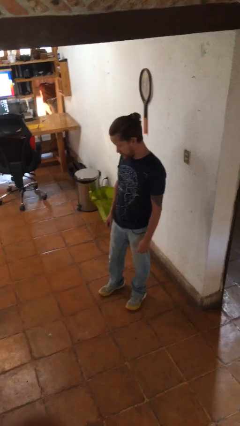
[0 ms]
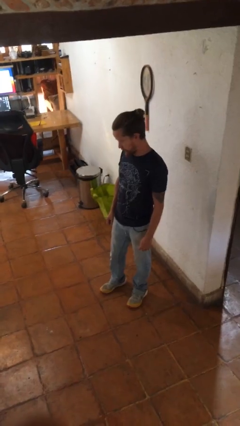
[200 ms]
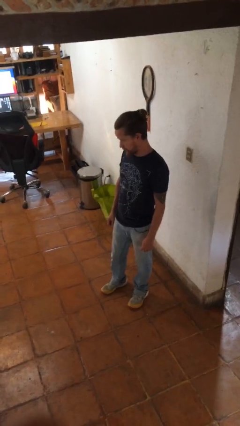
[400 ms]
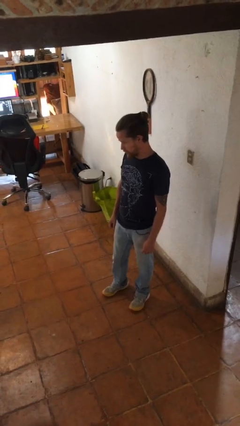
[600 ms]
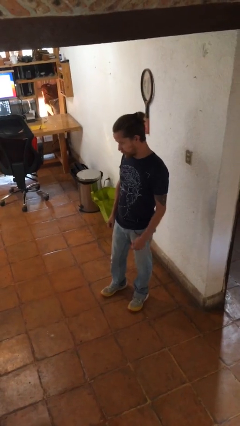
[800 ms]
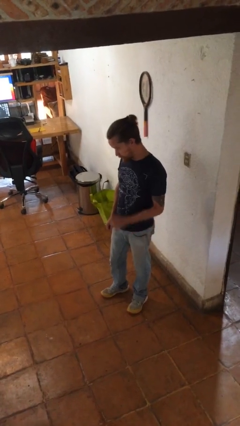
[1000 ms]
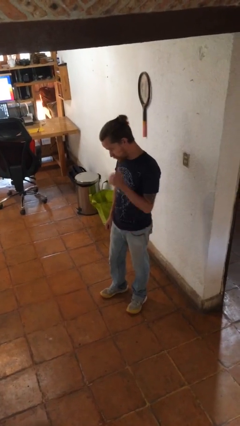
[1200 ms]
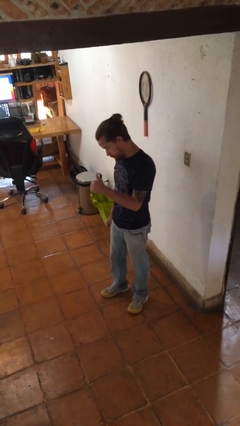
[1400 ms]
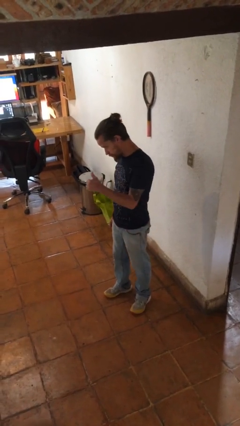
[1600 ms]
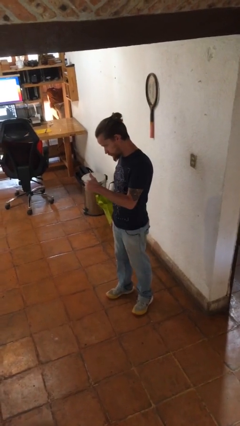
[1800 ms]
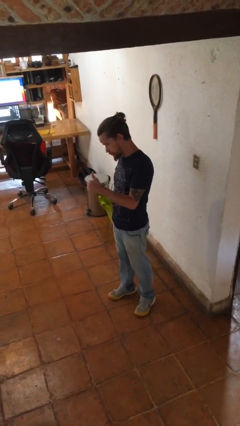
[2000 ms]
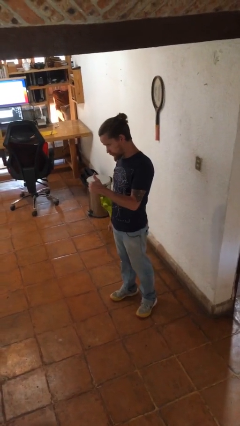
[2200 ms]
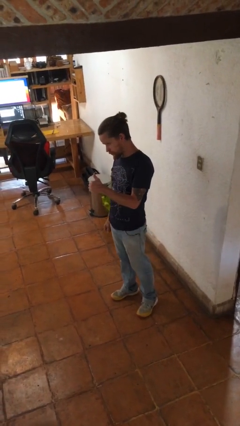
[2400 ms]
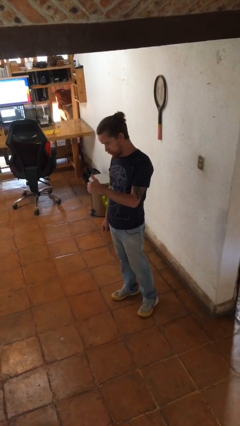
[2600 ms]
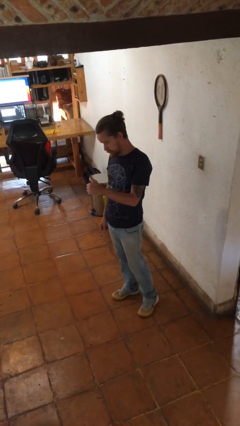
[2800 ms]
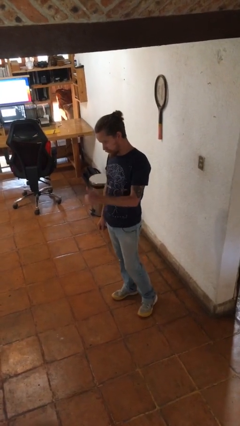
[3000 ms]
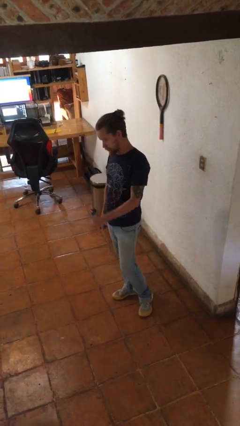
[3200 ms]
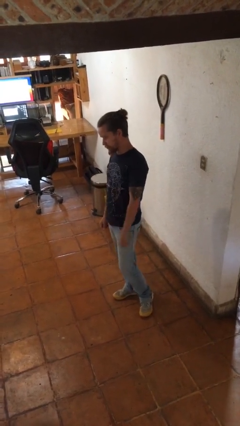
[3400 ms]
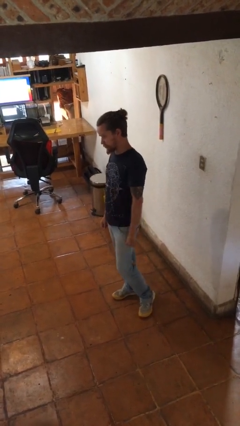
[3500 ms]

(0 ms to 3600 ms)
person gestures thumbs up

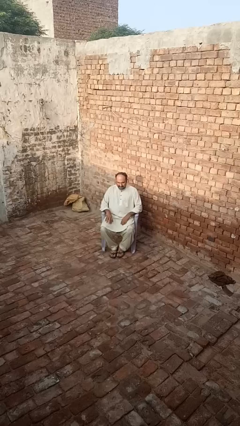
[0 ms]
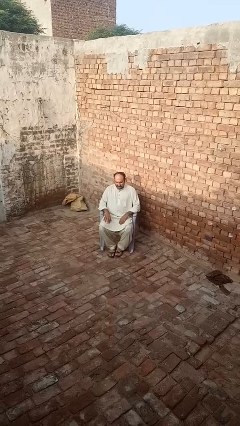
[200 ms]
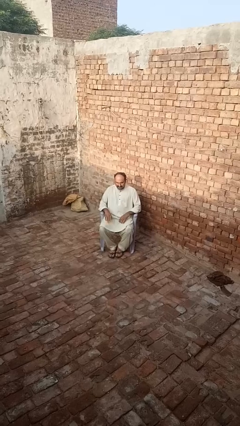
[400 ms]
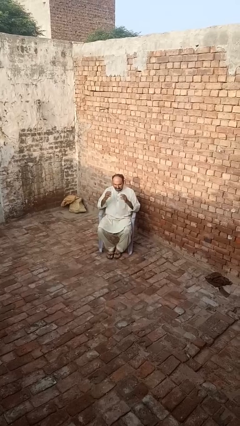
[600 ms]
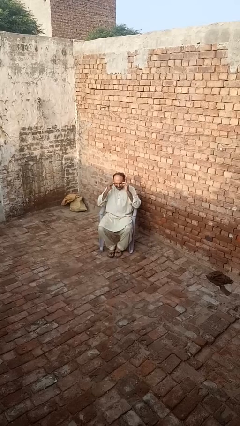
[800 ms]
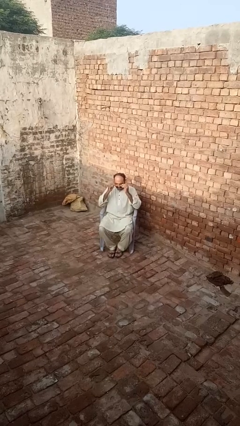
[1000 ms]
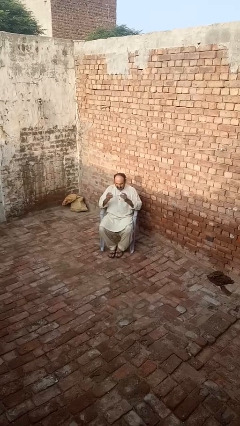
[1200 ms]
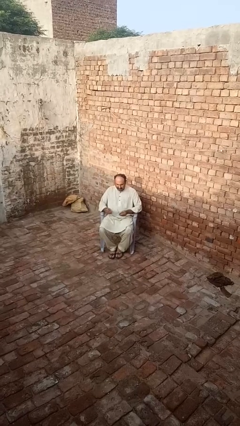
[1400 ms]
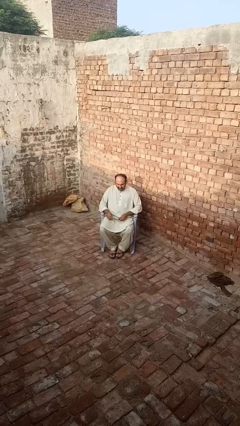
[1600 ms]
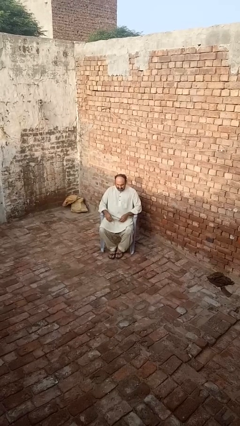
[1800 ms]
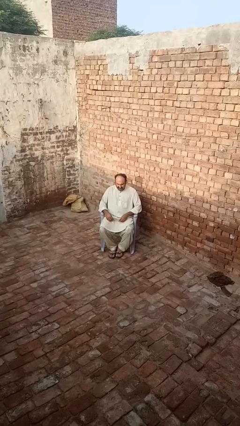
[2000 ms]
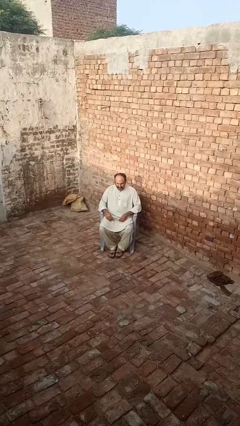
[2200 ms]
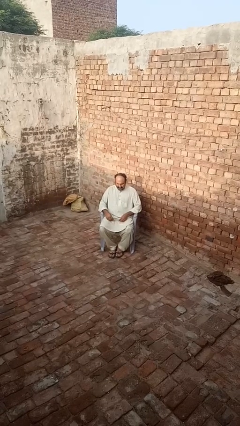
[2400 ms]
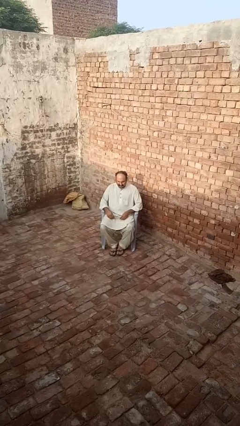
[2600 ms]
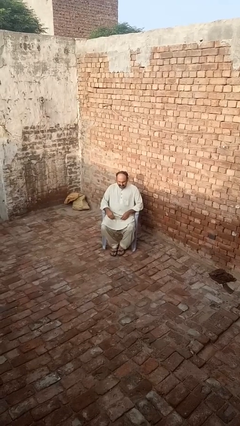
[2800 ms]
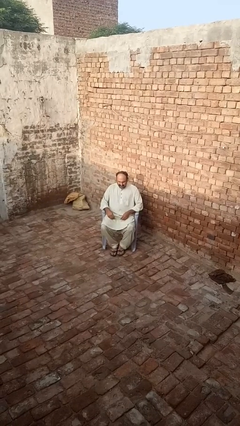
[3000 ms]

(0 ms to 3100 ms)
person takes off glasses

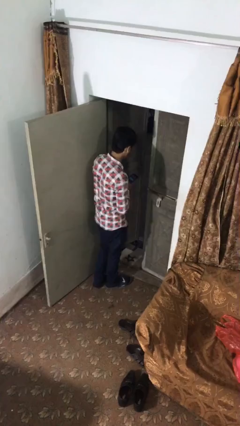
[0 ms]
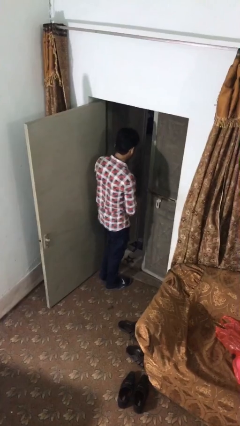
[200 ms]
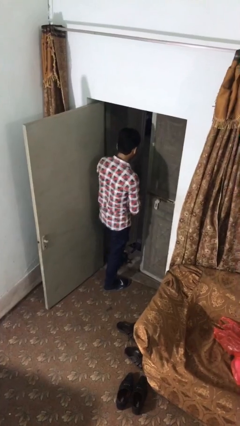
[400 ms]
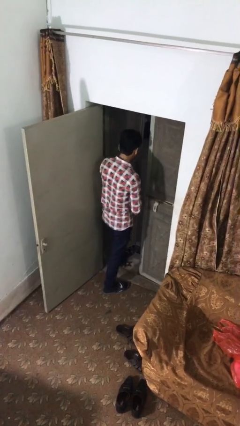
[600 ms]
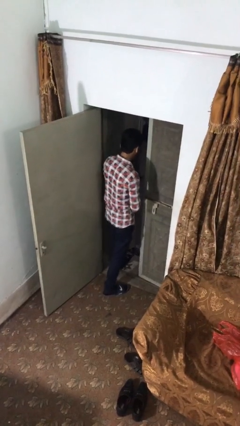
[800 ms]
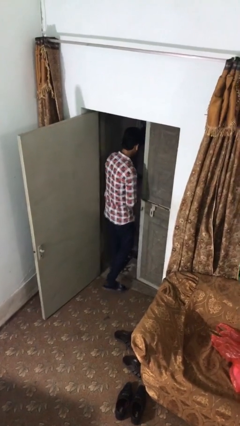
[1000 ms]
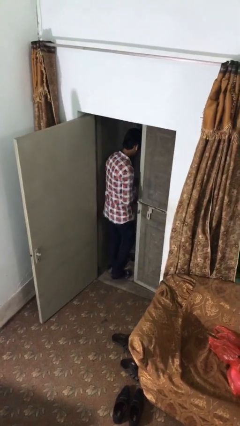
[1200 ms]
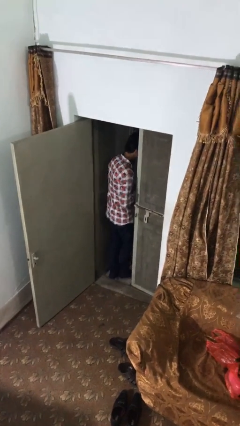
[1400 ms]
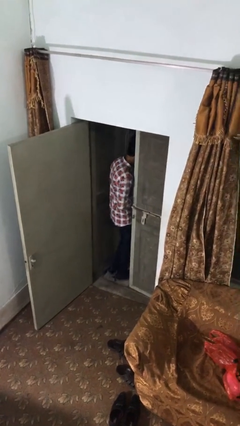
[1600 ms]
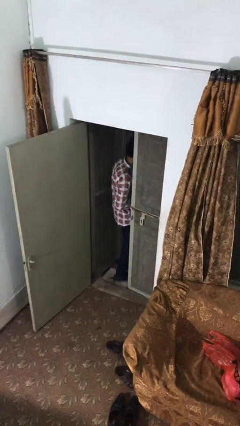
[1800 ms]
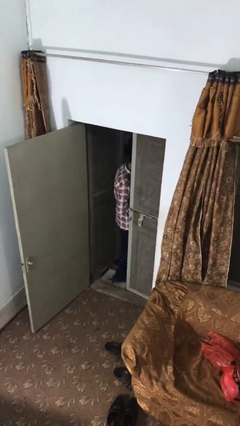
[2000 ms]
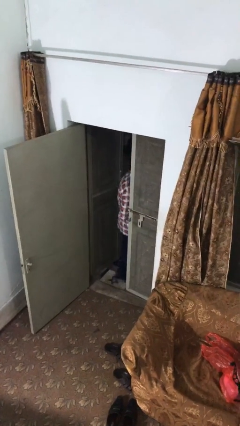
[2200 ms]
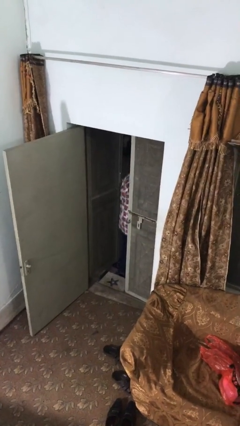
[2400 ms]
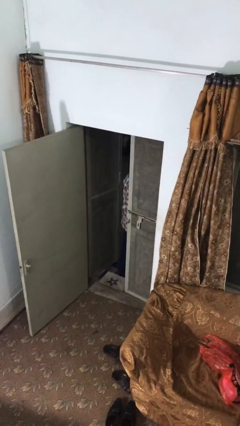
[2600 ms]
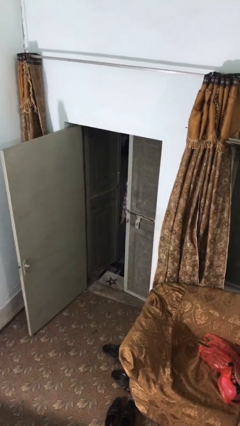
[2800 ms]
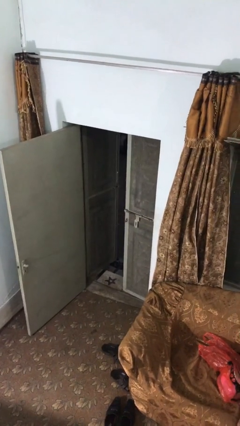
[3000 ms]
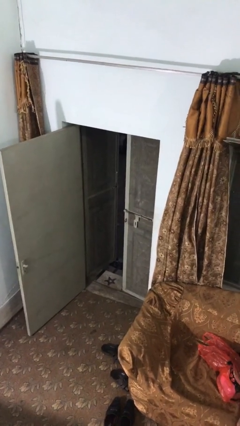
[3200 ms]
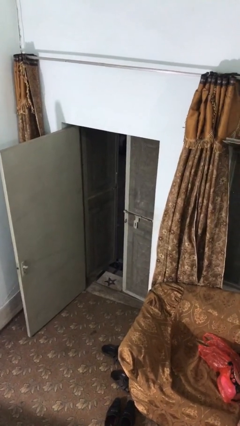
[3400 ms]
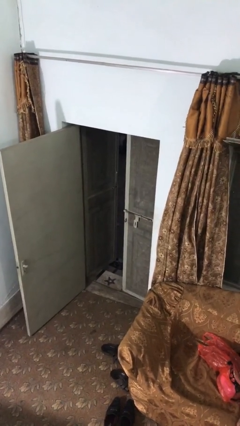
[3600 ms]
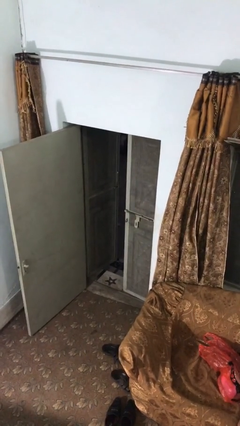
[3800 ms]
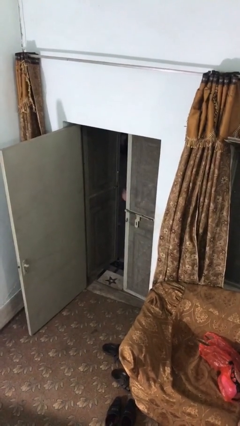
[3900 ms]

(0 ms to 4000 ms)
person exits scene through structure

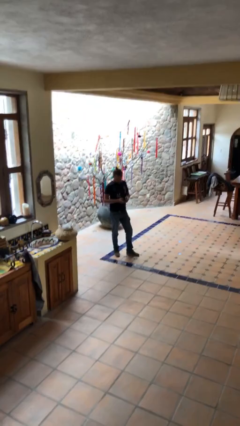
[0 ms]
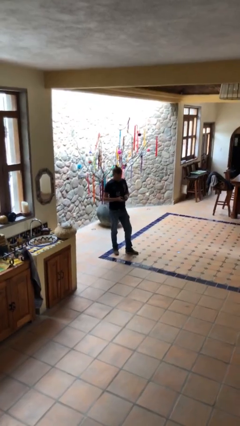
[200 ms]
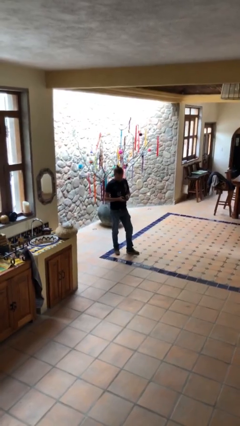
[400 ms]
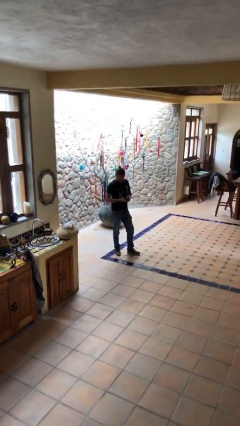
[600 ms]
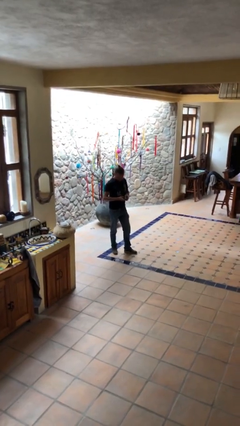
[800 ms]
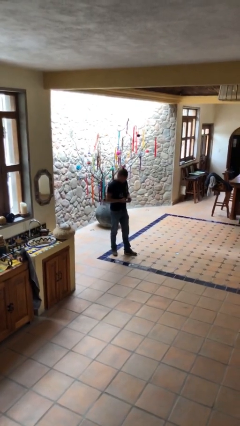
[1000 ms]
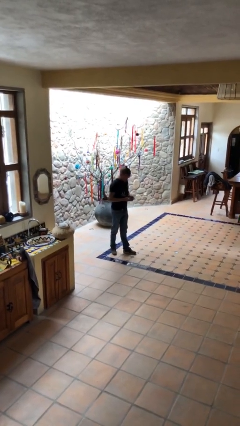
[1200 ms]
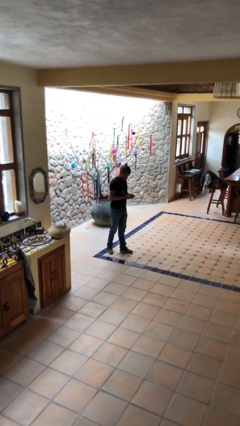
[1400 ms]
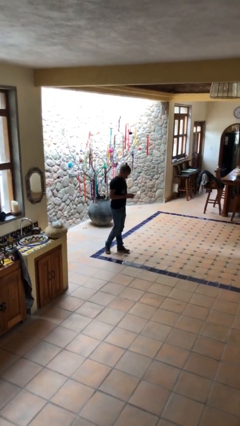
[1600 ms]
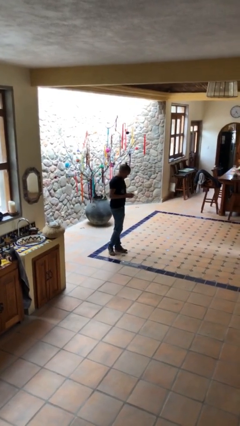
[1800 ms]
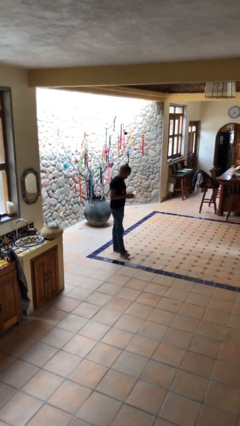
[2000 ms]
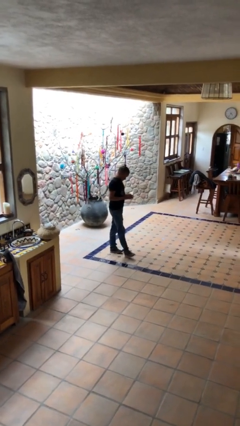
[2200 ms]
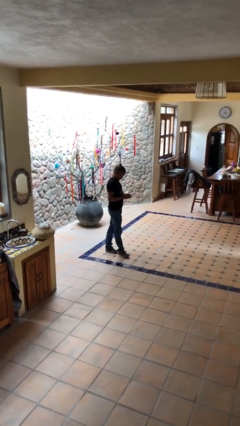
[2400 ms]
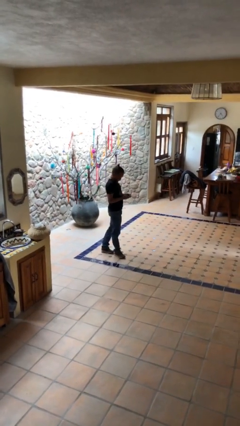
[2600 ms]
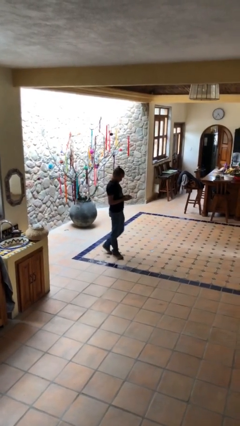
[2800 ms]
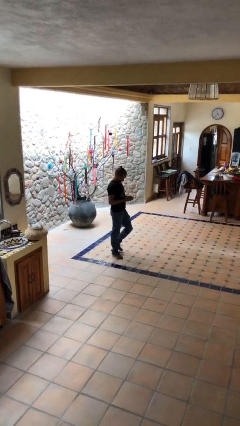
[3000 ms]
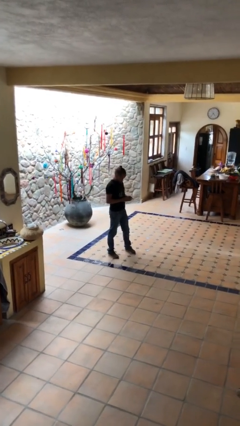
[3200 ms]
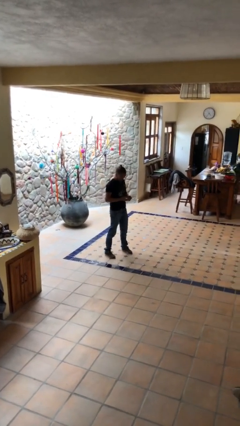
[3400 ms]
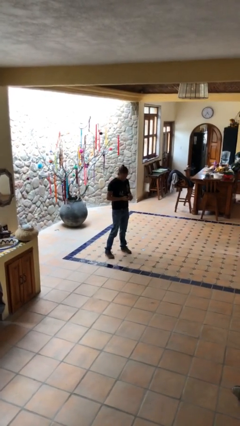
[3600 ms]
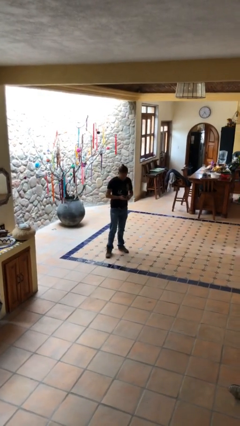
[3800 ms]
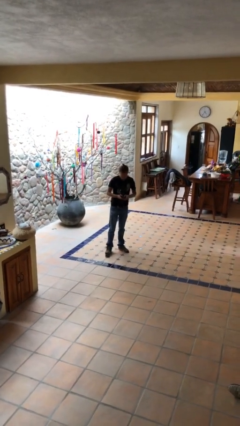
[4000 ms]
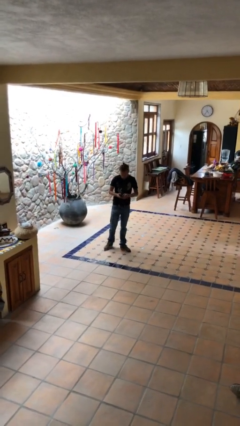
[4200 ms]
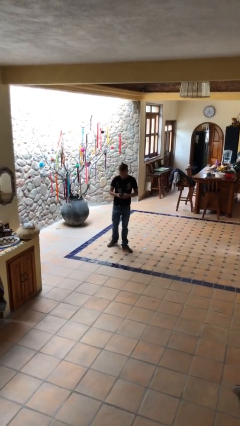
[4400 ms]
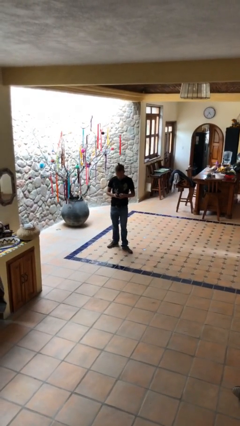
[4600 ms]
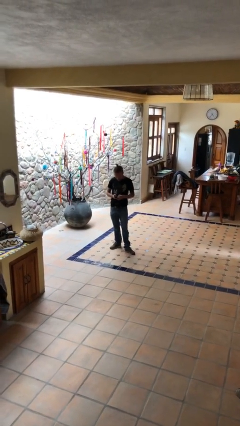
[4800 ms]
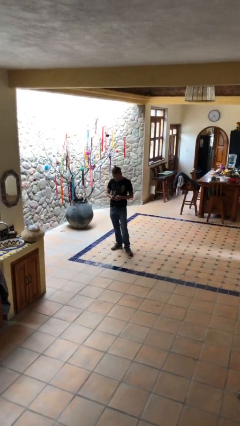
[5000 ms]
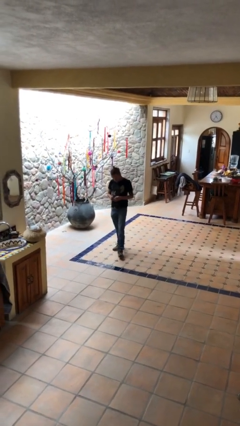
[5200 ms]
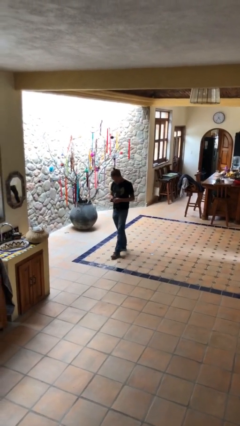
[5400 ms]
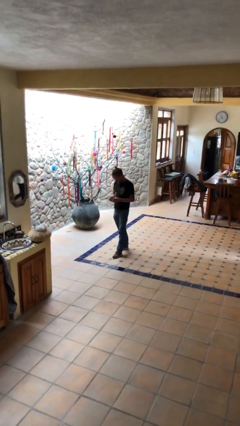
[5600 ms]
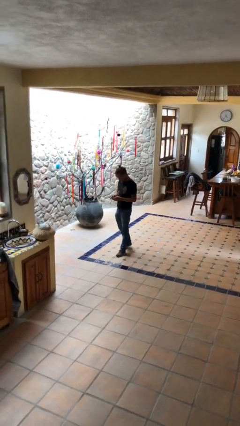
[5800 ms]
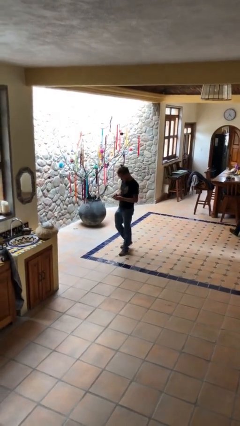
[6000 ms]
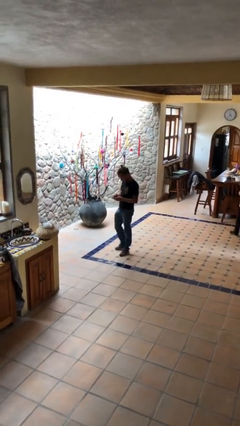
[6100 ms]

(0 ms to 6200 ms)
person texts on phone

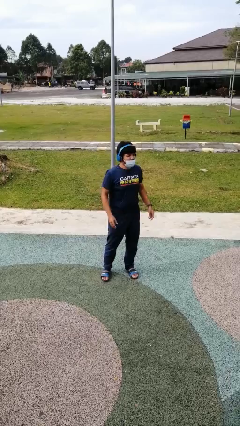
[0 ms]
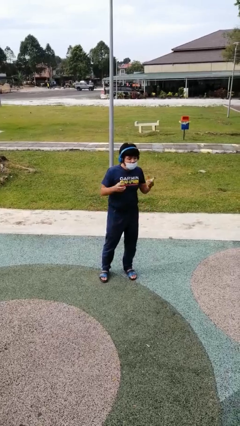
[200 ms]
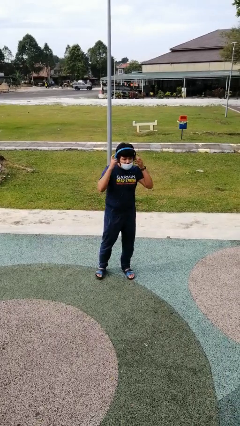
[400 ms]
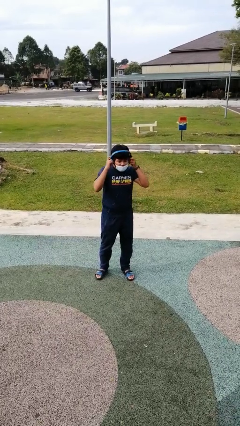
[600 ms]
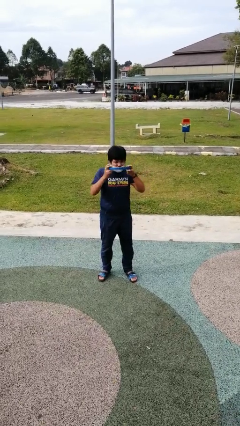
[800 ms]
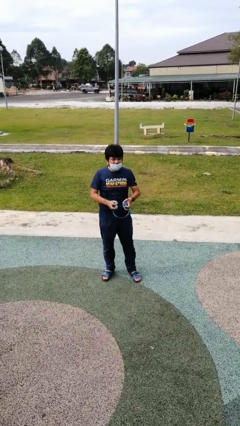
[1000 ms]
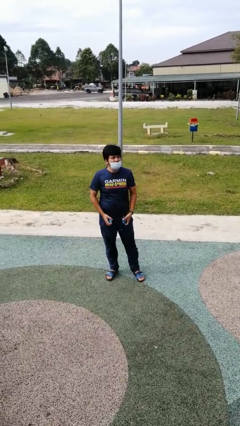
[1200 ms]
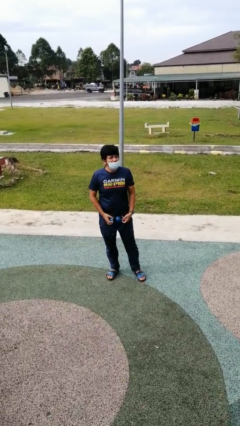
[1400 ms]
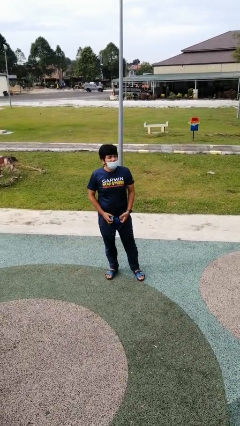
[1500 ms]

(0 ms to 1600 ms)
person takes off headphones
